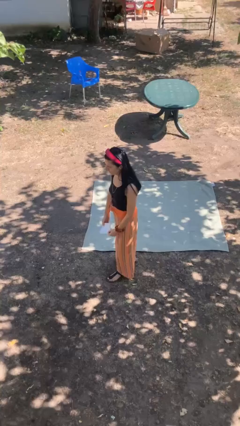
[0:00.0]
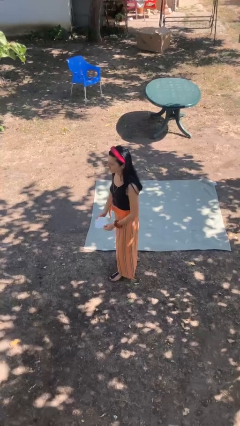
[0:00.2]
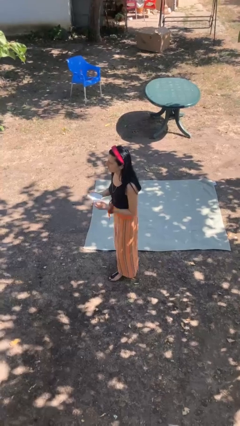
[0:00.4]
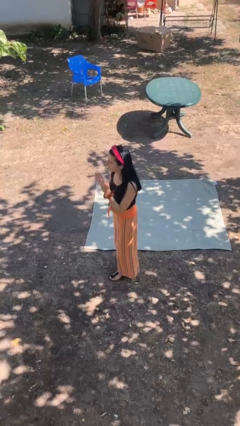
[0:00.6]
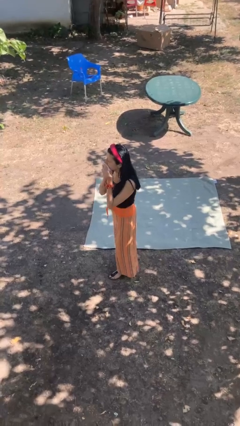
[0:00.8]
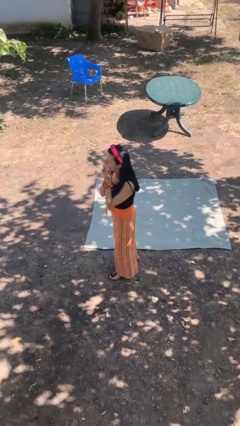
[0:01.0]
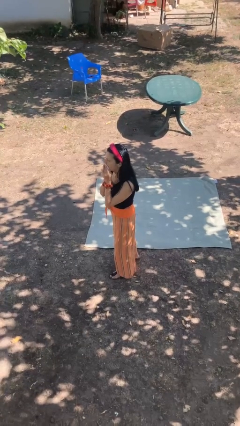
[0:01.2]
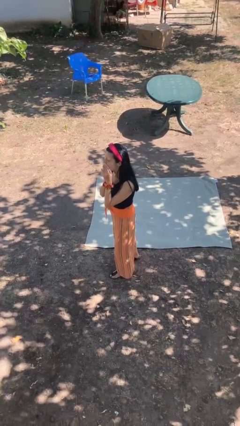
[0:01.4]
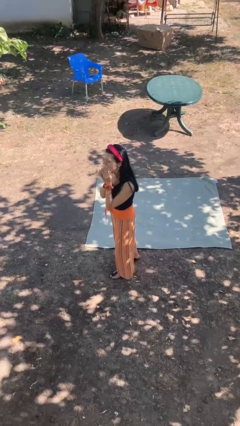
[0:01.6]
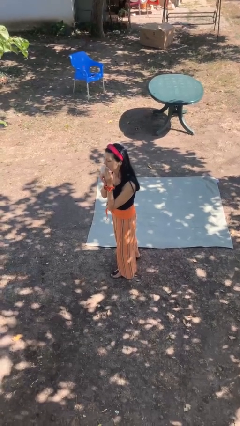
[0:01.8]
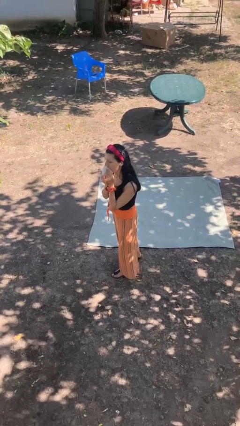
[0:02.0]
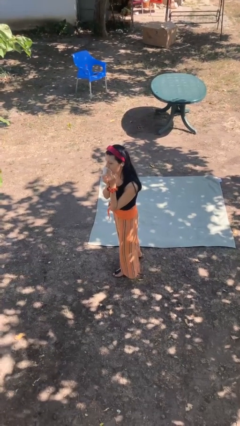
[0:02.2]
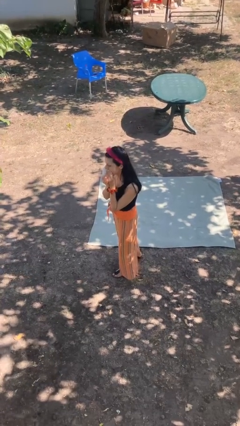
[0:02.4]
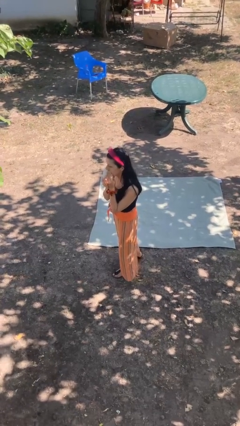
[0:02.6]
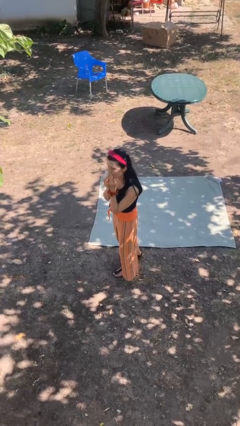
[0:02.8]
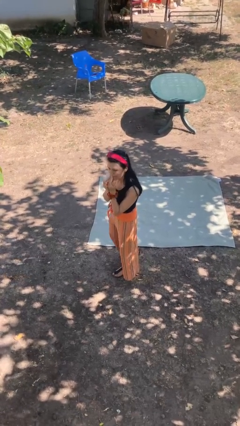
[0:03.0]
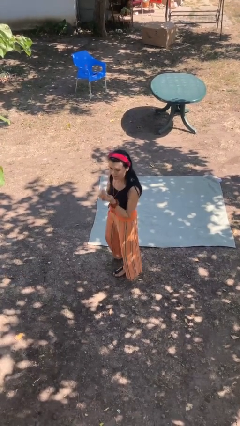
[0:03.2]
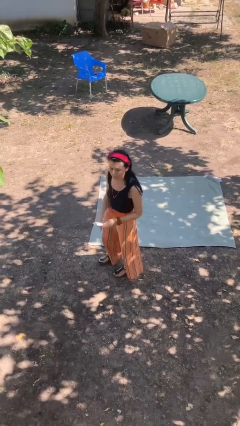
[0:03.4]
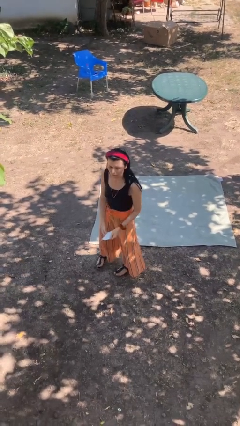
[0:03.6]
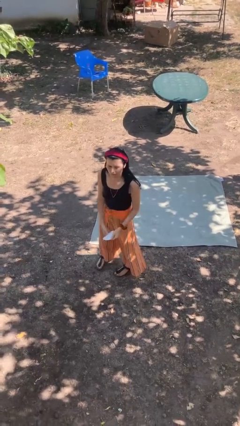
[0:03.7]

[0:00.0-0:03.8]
person wipes mouth with napkin

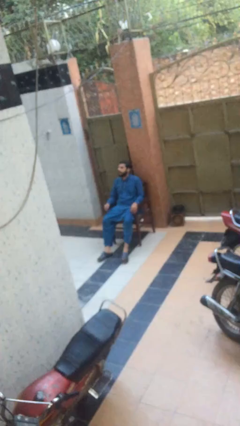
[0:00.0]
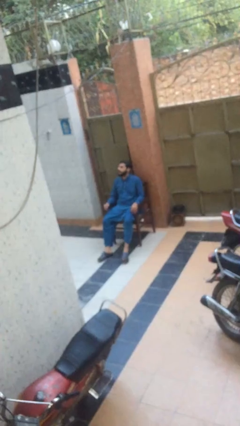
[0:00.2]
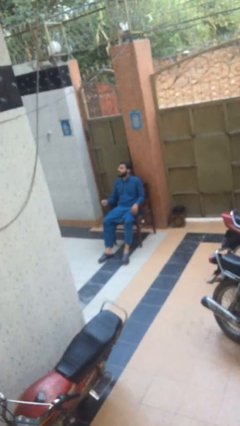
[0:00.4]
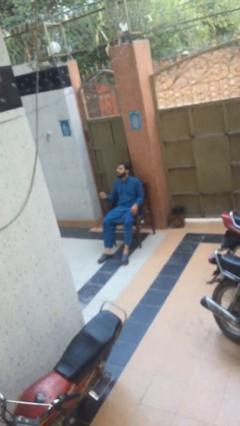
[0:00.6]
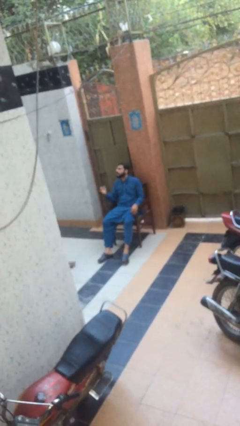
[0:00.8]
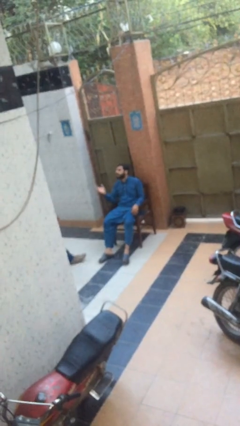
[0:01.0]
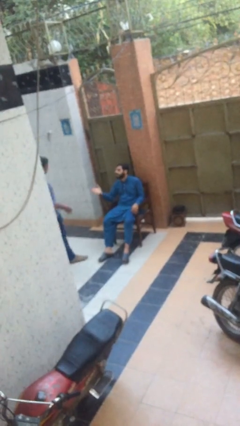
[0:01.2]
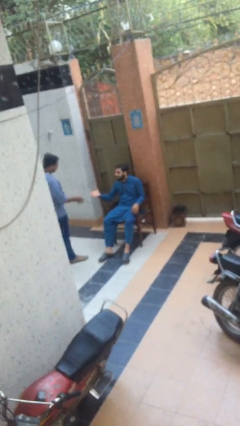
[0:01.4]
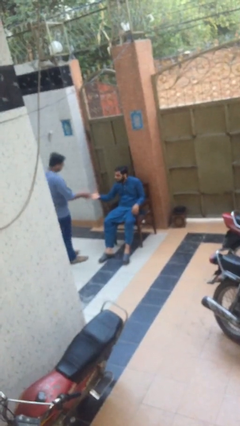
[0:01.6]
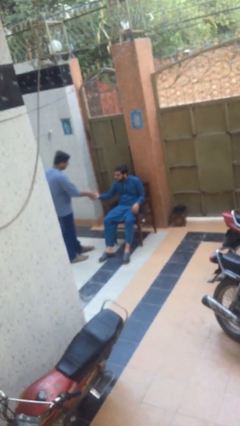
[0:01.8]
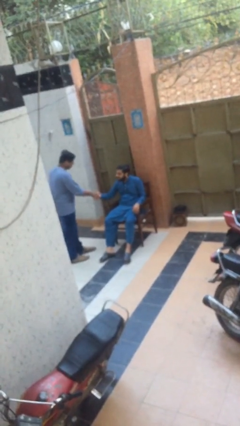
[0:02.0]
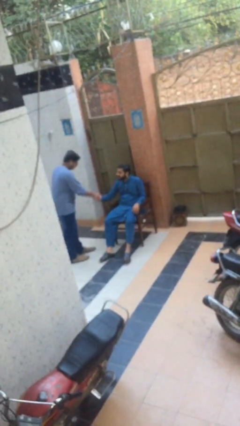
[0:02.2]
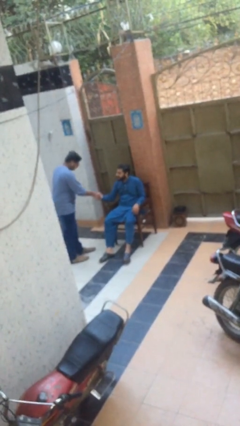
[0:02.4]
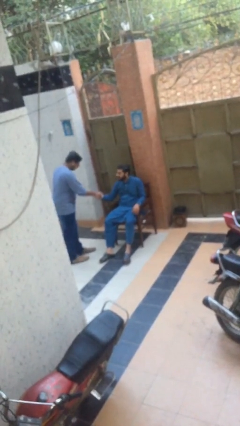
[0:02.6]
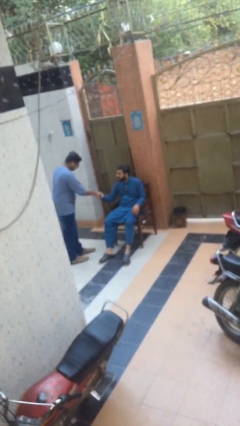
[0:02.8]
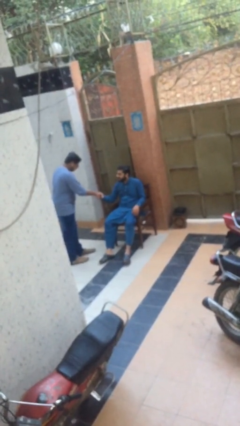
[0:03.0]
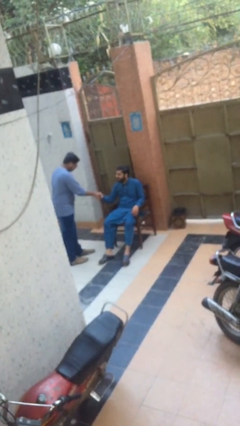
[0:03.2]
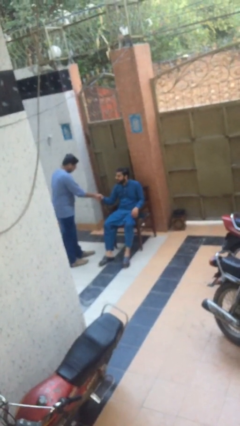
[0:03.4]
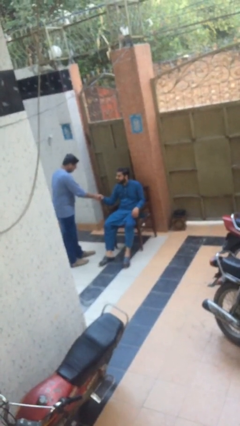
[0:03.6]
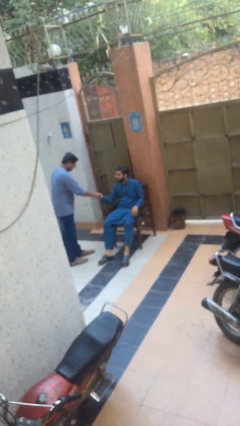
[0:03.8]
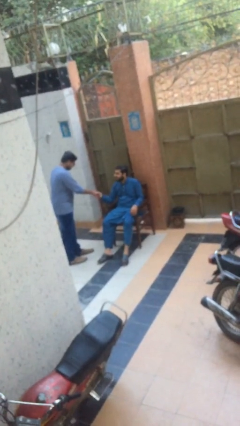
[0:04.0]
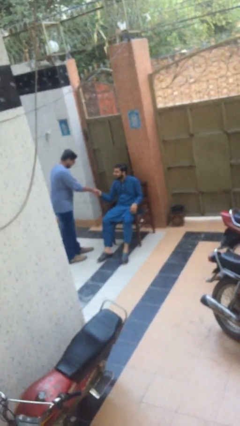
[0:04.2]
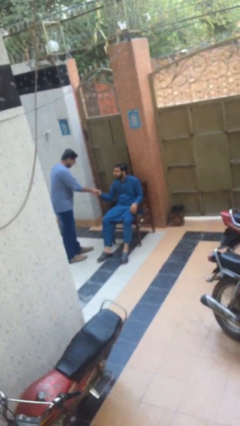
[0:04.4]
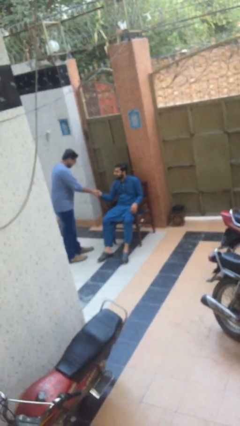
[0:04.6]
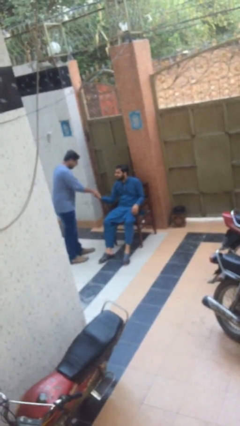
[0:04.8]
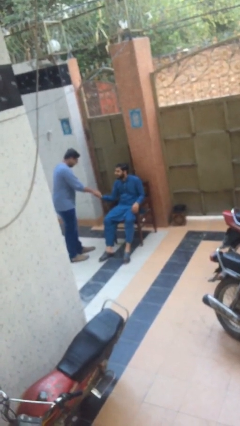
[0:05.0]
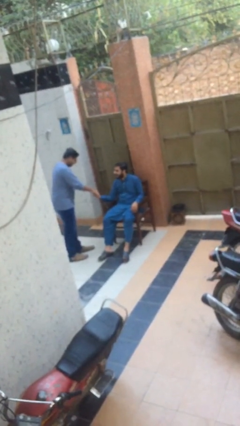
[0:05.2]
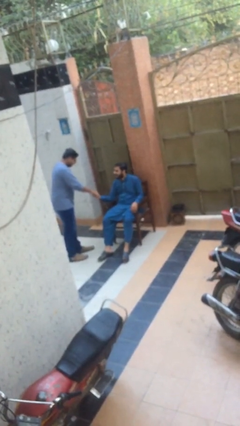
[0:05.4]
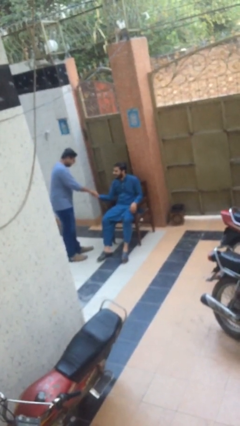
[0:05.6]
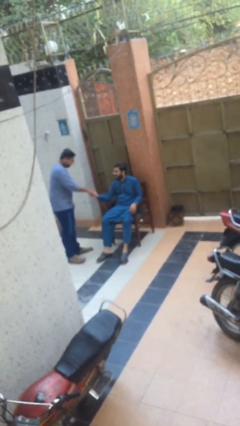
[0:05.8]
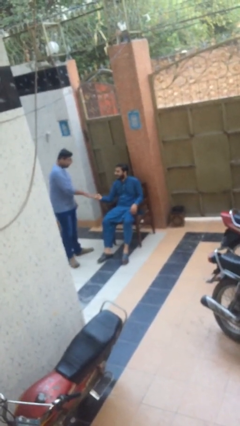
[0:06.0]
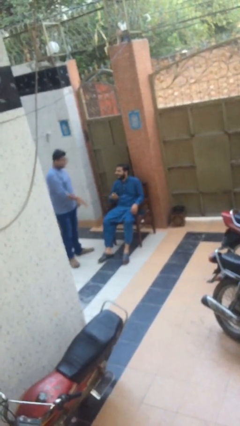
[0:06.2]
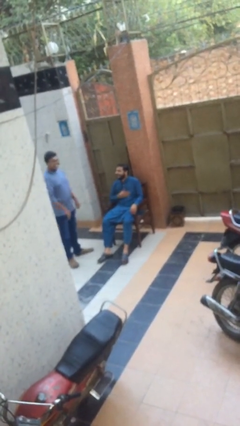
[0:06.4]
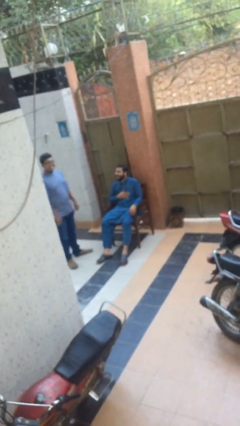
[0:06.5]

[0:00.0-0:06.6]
person shakes hand

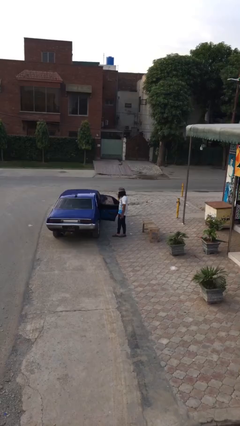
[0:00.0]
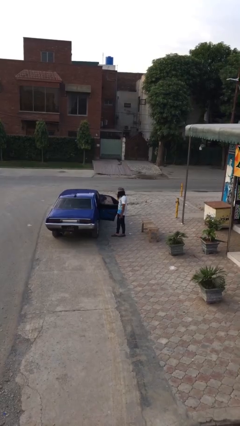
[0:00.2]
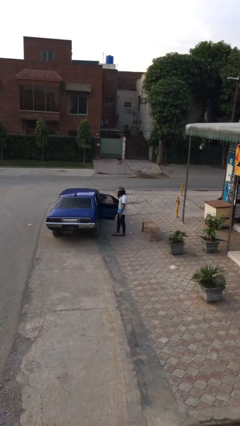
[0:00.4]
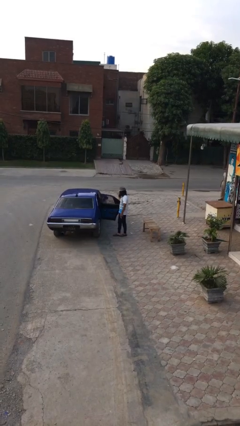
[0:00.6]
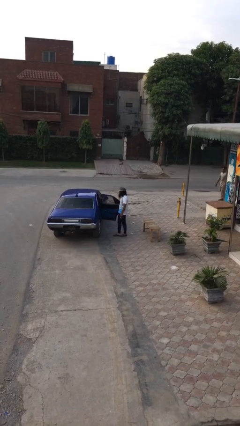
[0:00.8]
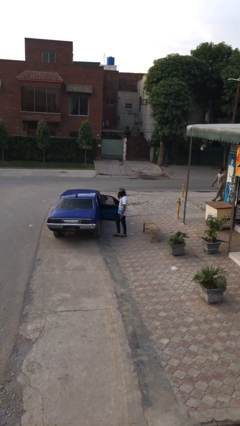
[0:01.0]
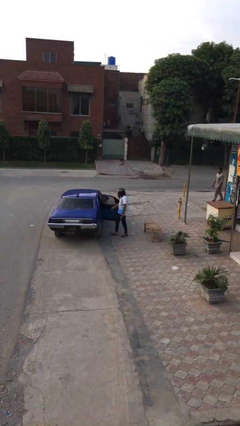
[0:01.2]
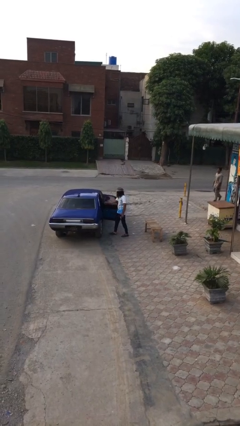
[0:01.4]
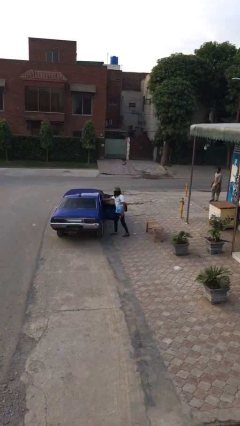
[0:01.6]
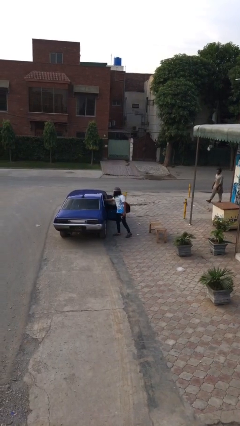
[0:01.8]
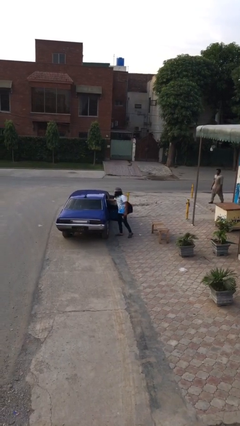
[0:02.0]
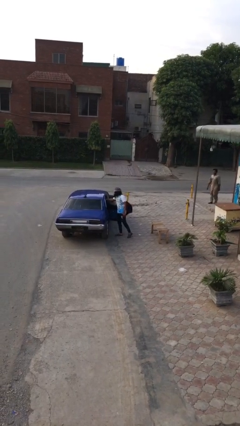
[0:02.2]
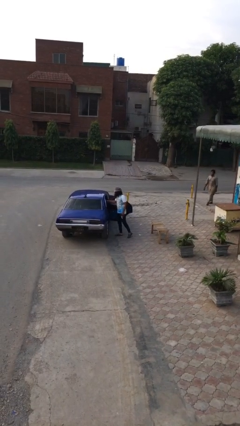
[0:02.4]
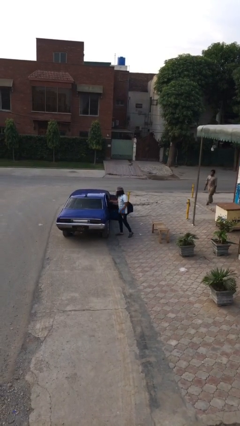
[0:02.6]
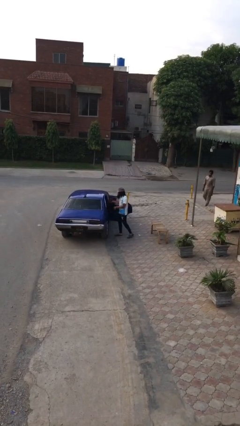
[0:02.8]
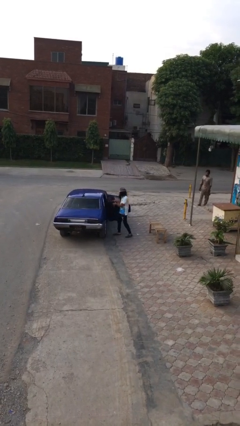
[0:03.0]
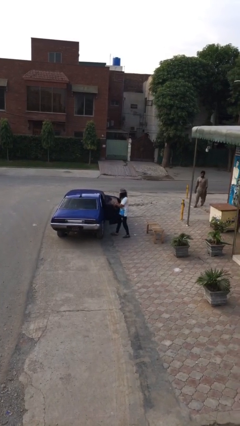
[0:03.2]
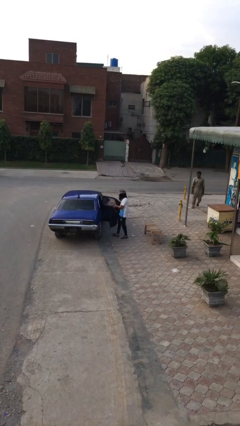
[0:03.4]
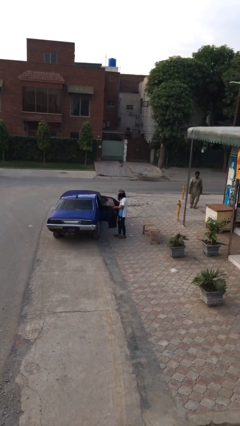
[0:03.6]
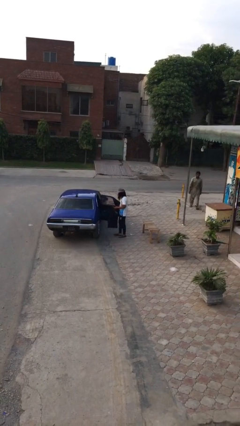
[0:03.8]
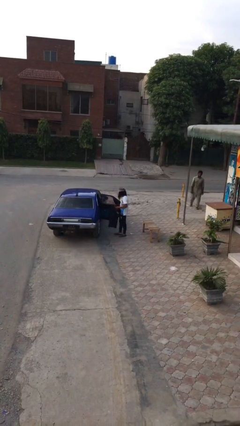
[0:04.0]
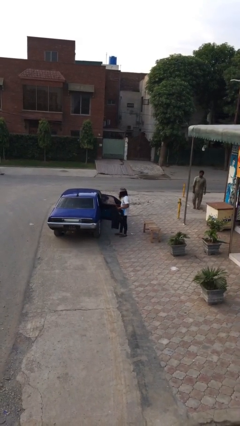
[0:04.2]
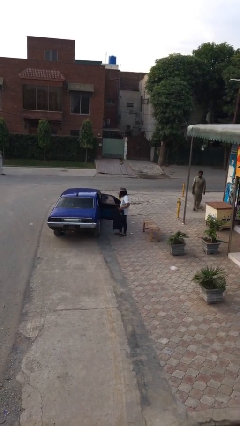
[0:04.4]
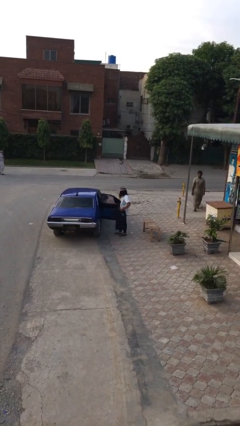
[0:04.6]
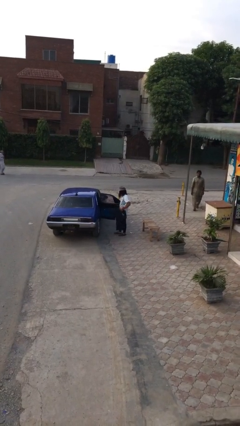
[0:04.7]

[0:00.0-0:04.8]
person unloads car

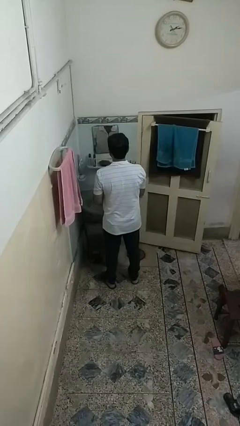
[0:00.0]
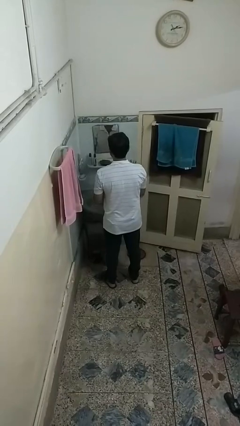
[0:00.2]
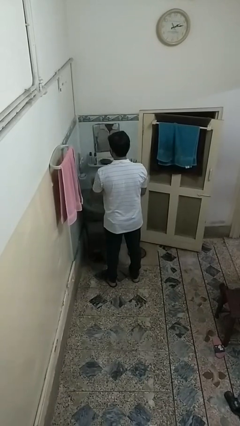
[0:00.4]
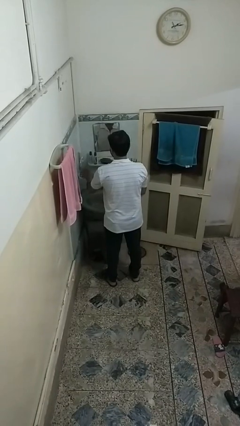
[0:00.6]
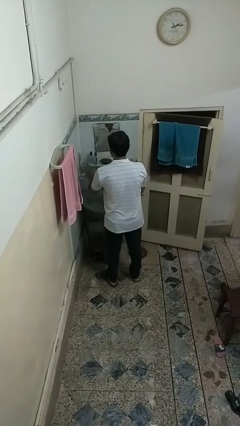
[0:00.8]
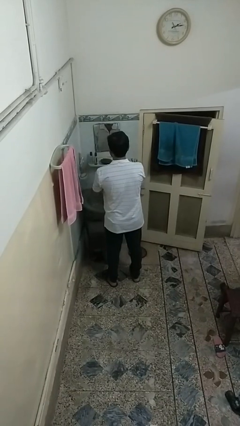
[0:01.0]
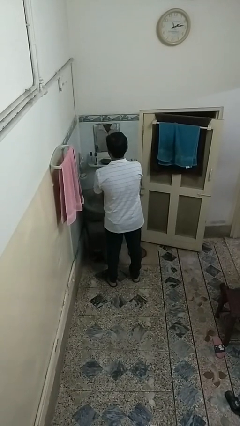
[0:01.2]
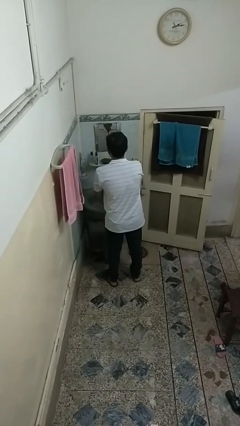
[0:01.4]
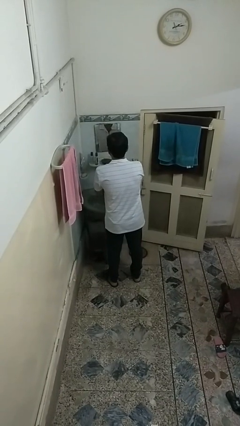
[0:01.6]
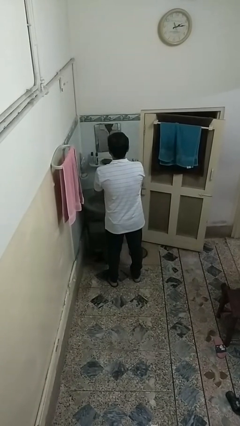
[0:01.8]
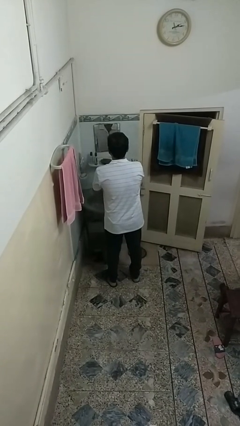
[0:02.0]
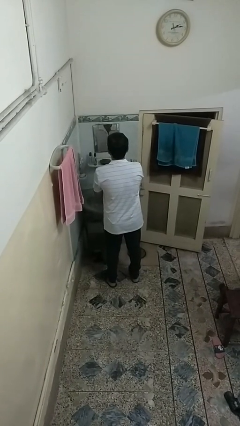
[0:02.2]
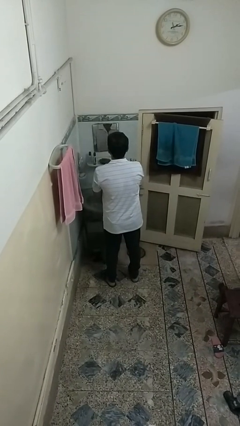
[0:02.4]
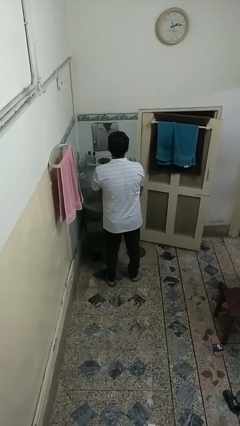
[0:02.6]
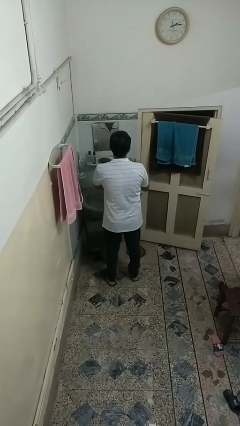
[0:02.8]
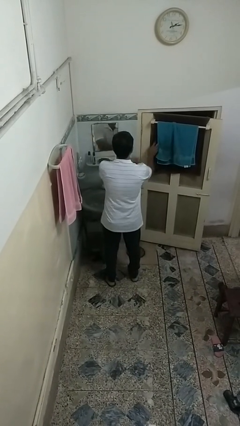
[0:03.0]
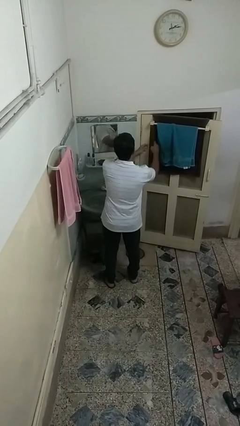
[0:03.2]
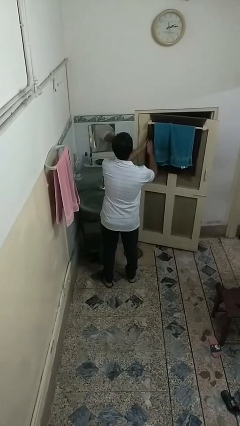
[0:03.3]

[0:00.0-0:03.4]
person washes hands
